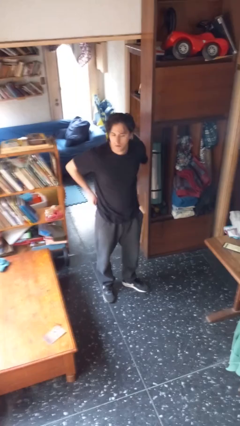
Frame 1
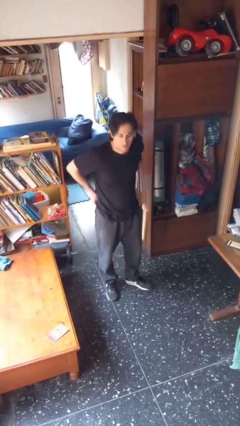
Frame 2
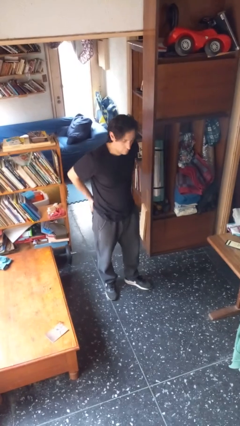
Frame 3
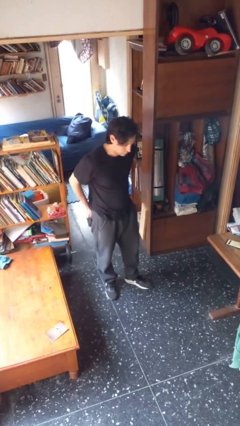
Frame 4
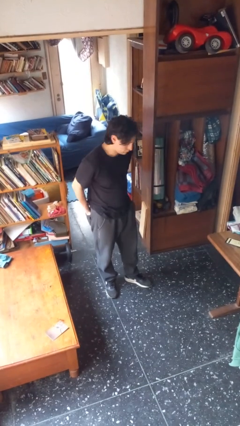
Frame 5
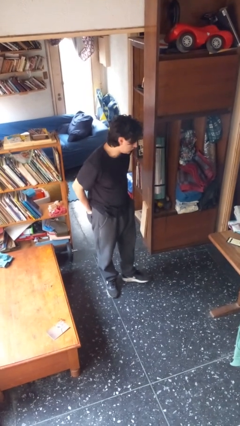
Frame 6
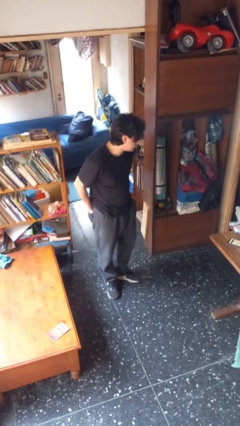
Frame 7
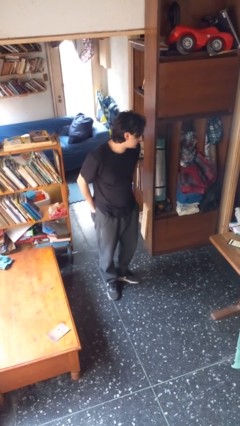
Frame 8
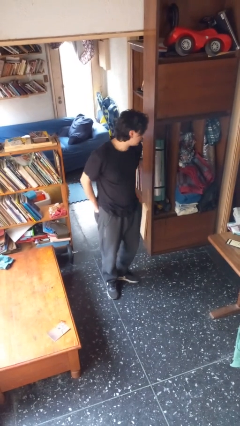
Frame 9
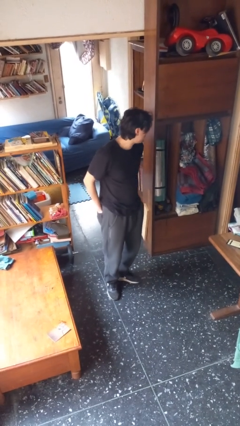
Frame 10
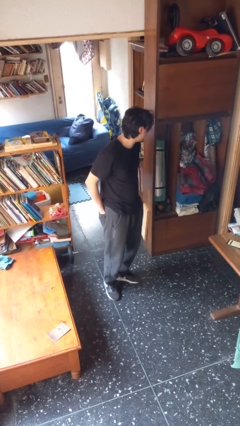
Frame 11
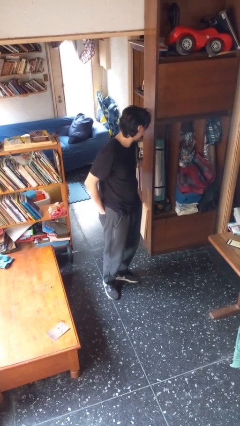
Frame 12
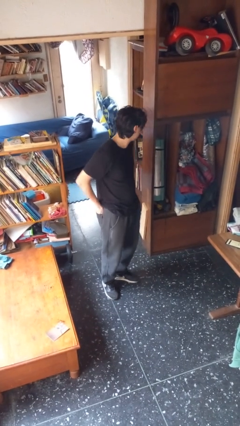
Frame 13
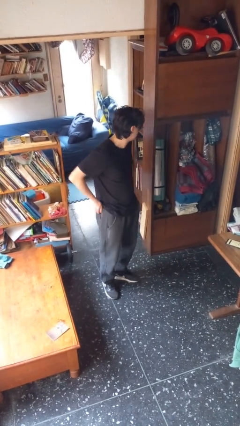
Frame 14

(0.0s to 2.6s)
person puts hands in back pockets

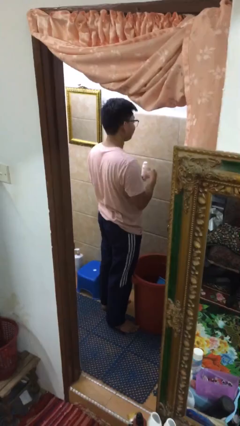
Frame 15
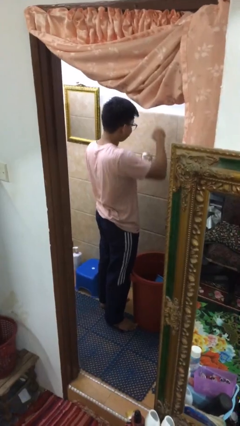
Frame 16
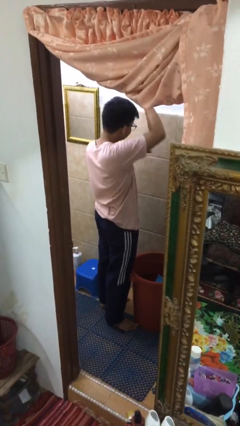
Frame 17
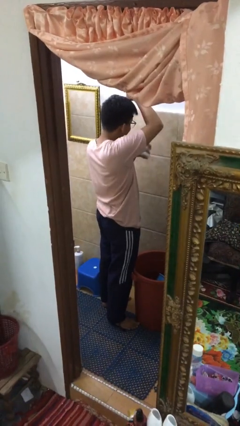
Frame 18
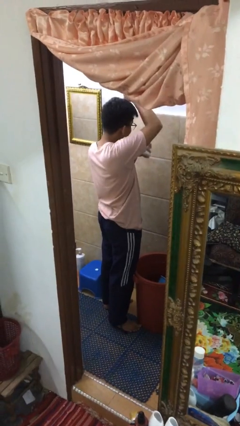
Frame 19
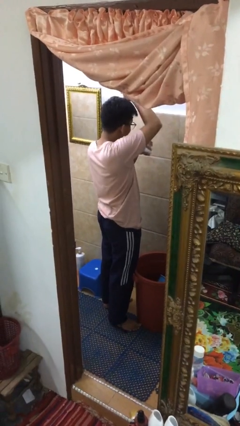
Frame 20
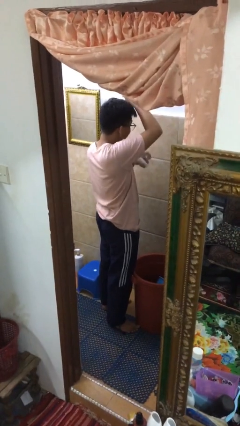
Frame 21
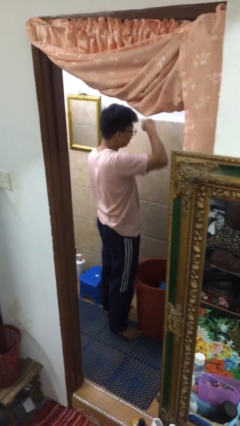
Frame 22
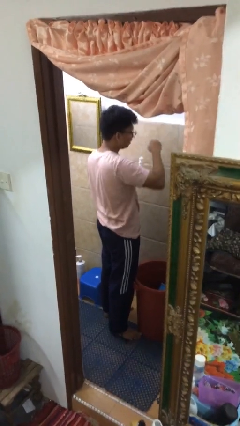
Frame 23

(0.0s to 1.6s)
person applies deodorant

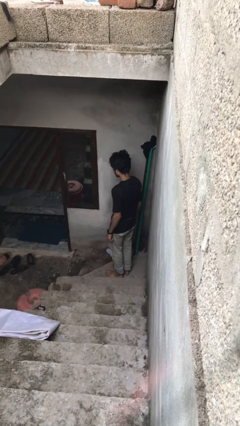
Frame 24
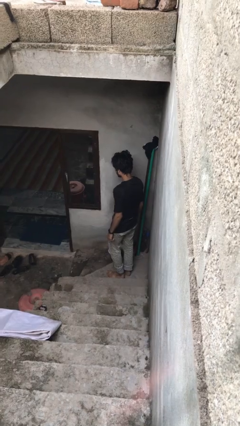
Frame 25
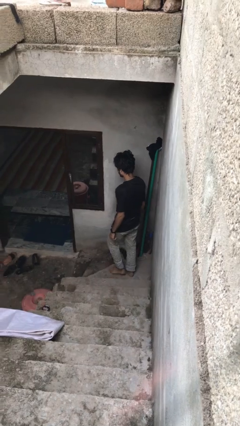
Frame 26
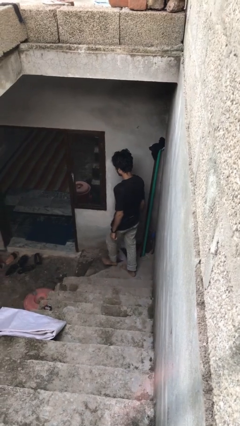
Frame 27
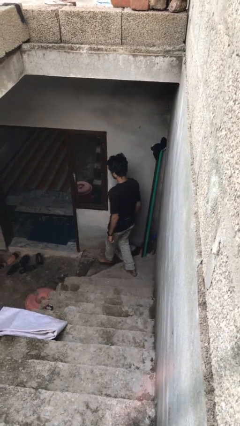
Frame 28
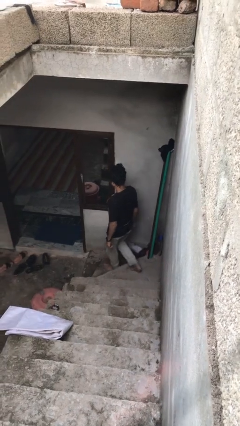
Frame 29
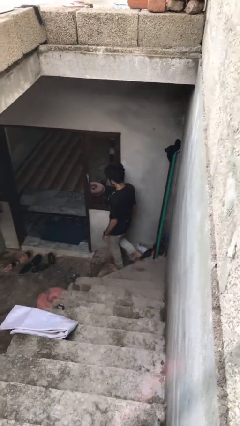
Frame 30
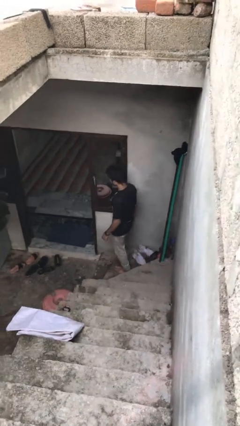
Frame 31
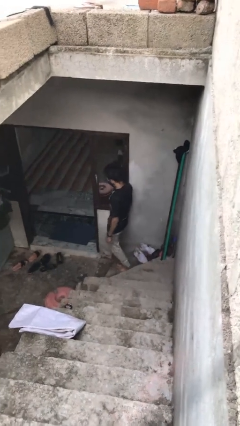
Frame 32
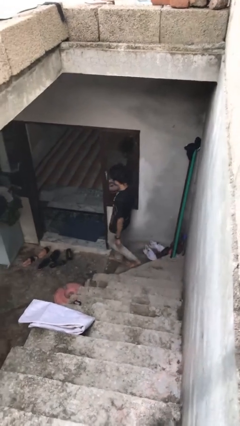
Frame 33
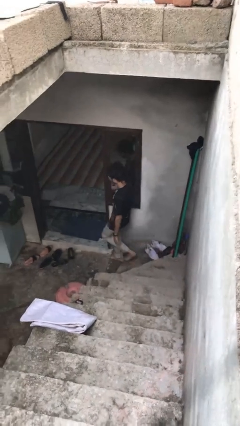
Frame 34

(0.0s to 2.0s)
person climbs down stairs

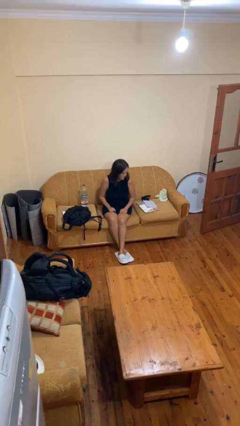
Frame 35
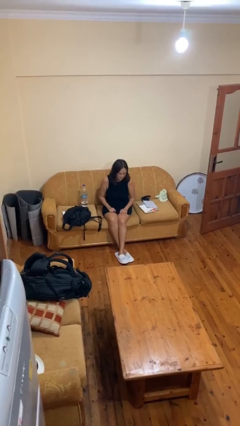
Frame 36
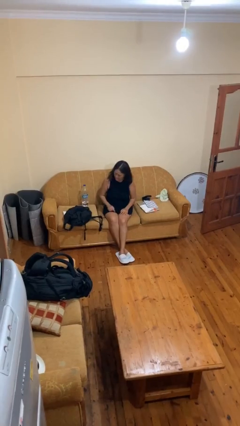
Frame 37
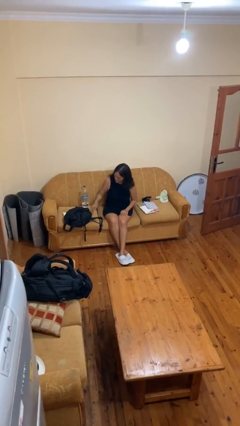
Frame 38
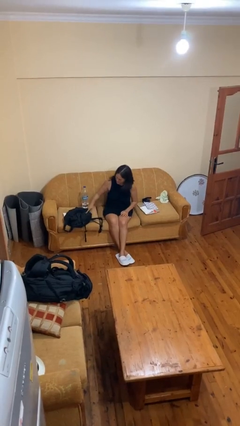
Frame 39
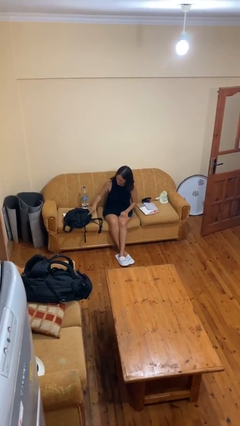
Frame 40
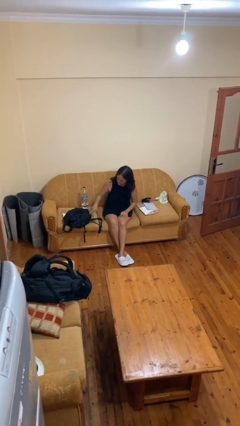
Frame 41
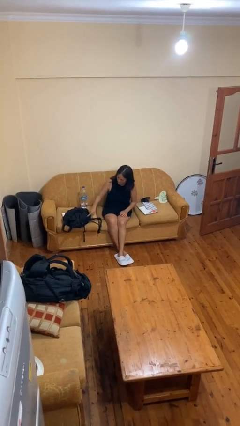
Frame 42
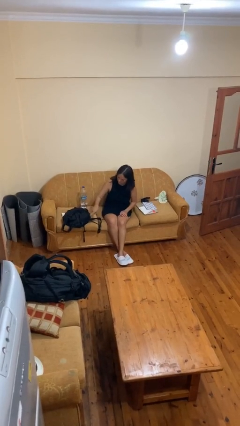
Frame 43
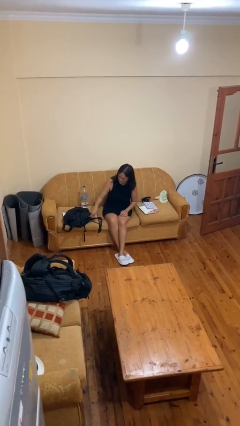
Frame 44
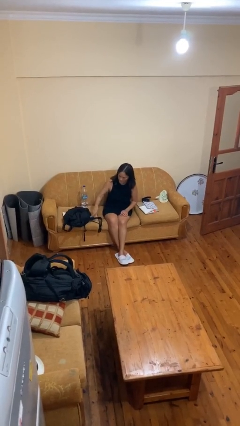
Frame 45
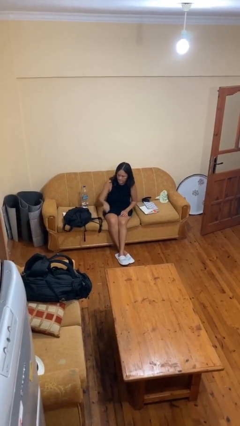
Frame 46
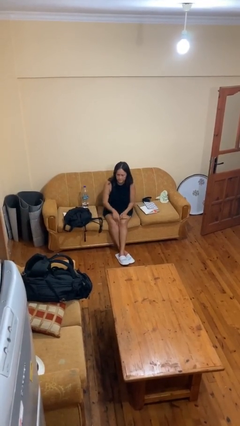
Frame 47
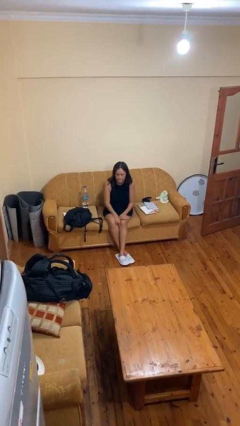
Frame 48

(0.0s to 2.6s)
person taps object with finger

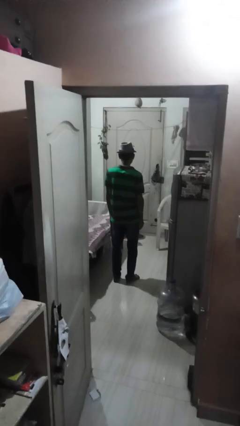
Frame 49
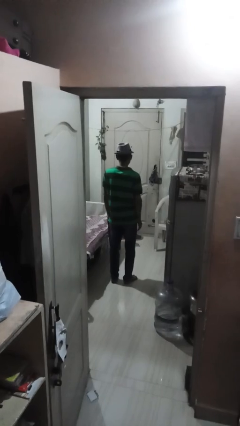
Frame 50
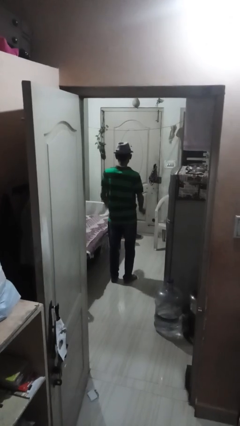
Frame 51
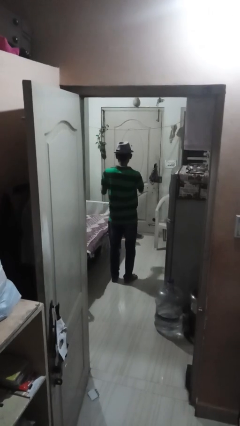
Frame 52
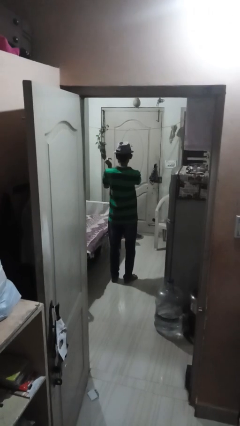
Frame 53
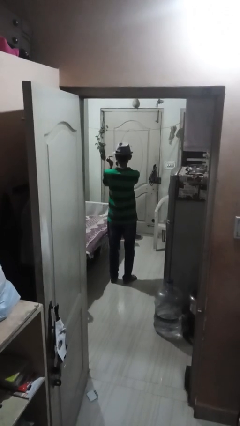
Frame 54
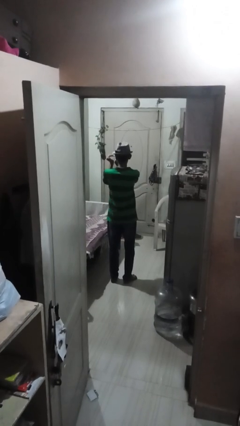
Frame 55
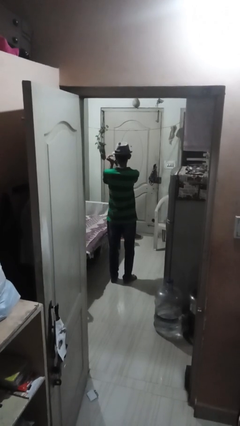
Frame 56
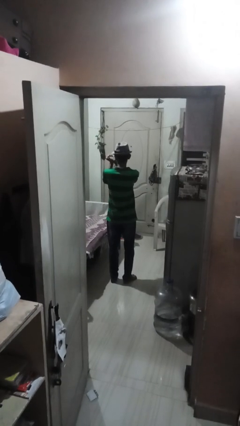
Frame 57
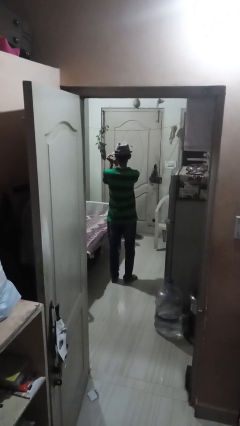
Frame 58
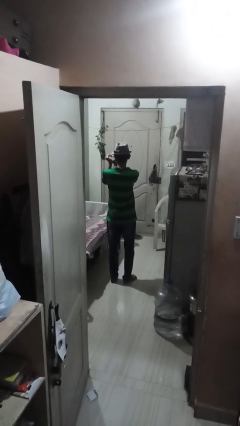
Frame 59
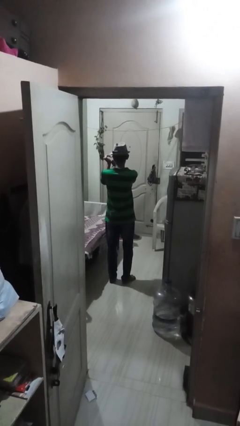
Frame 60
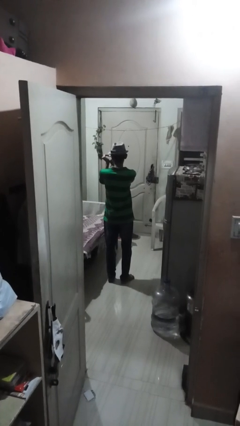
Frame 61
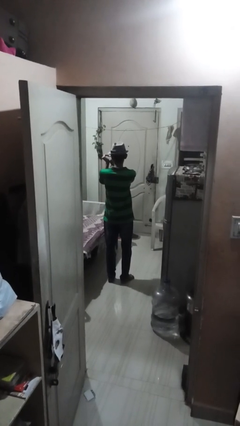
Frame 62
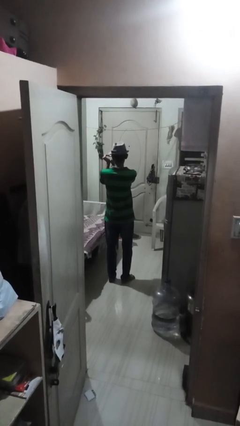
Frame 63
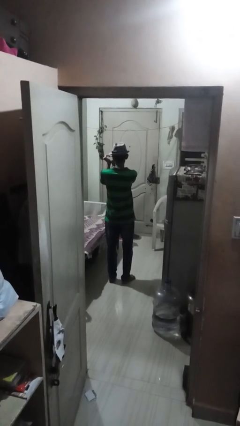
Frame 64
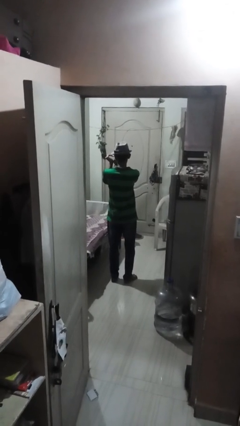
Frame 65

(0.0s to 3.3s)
person gestures heart

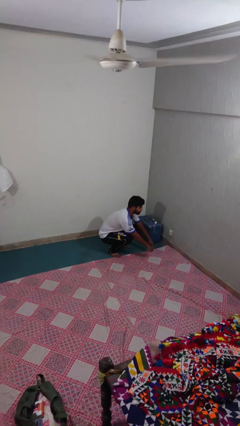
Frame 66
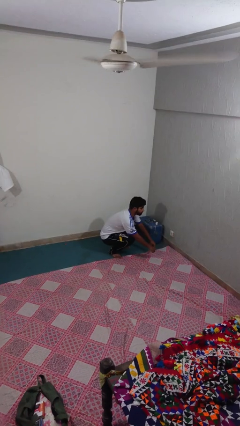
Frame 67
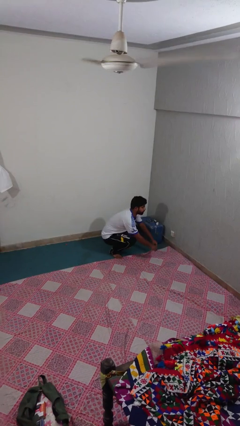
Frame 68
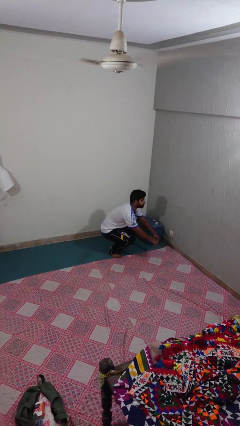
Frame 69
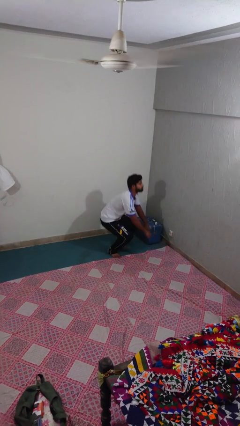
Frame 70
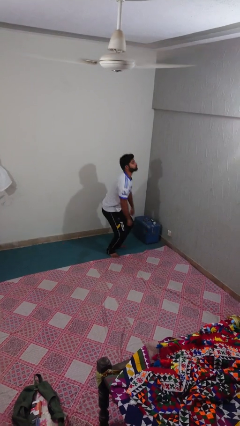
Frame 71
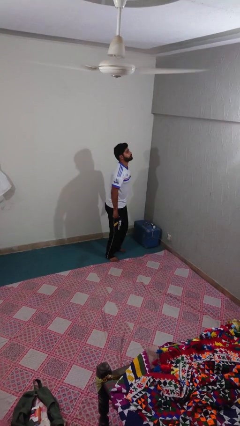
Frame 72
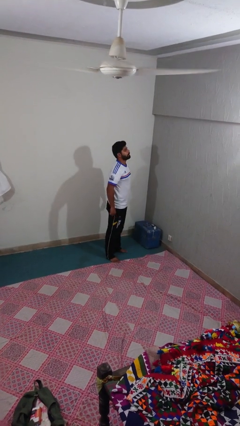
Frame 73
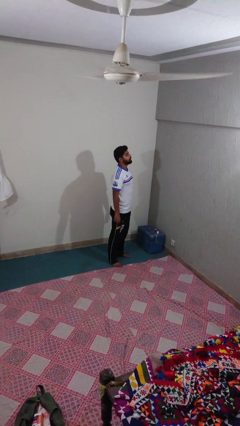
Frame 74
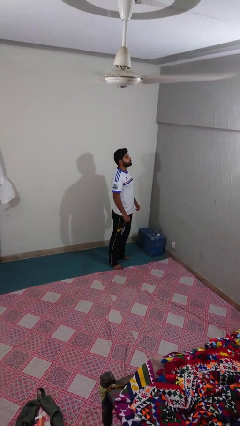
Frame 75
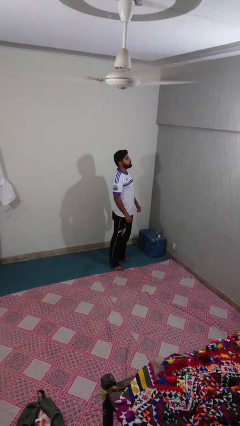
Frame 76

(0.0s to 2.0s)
person stands up

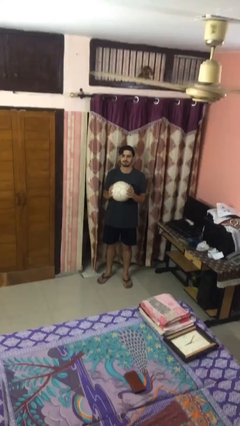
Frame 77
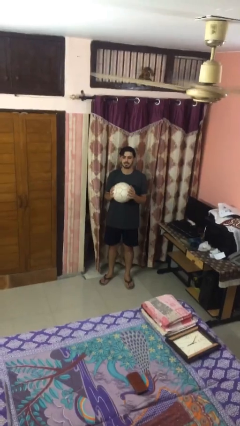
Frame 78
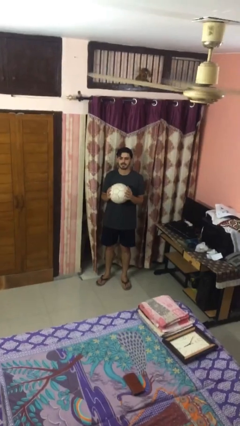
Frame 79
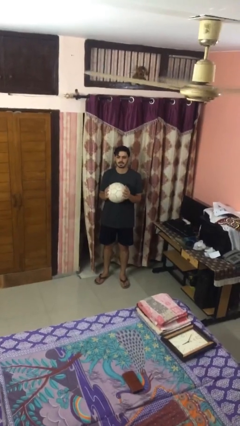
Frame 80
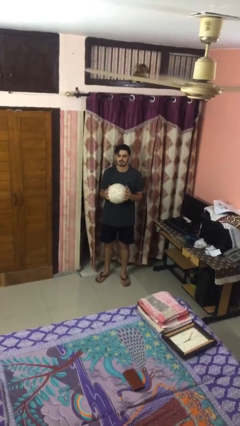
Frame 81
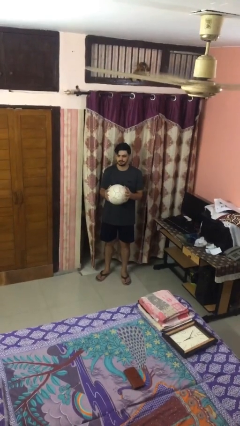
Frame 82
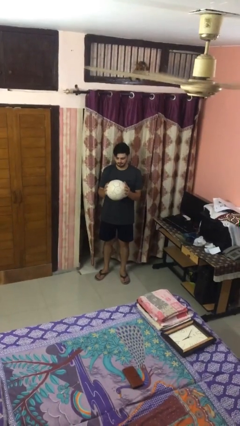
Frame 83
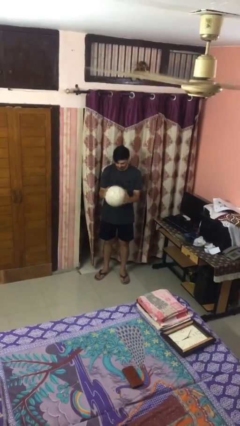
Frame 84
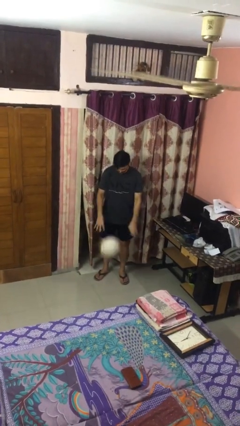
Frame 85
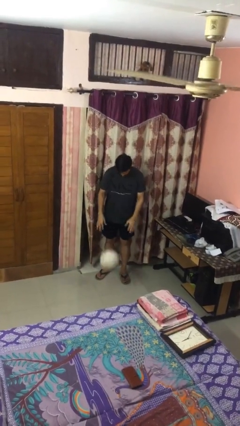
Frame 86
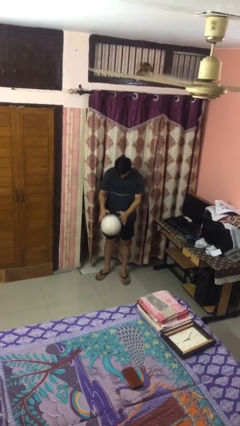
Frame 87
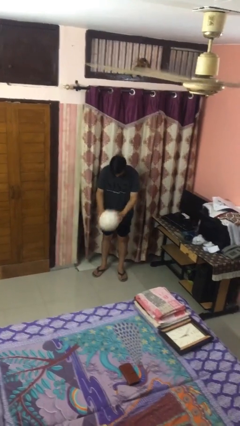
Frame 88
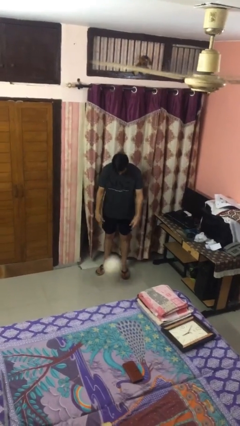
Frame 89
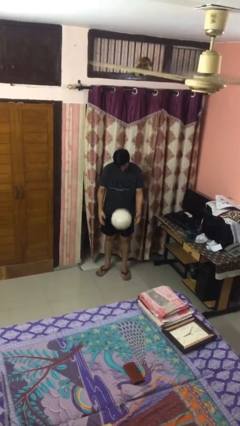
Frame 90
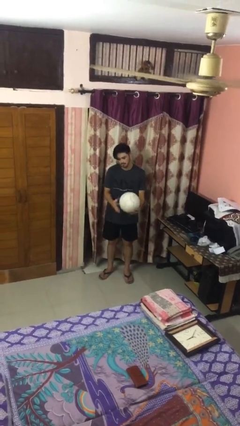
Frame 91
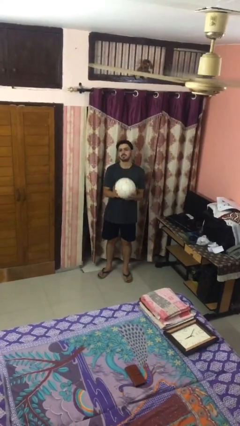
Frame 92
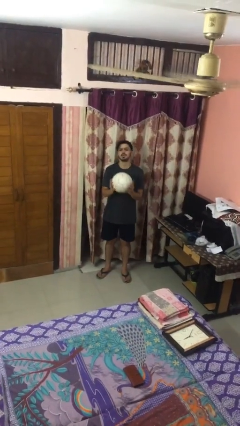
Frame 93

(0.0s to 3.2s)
person bounces ball on floor
